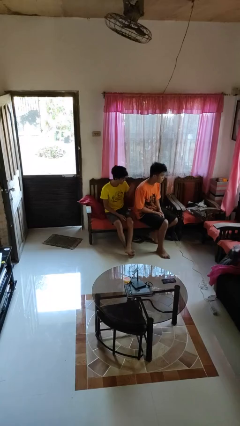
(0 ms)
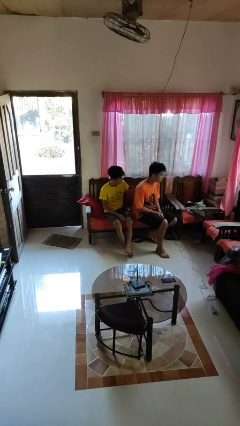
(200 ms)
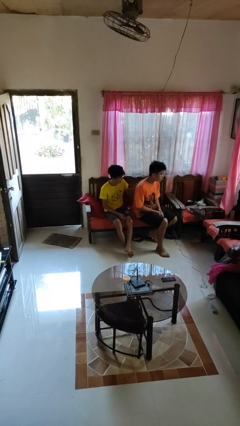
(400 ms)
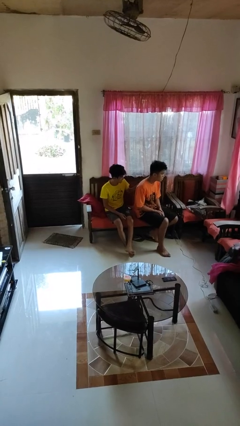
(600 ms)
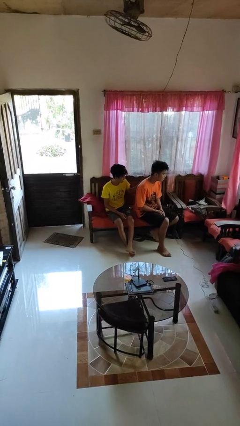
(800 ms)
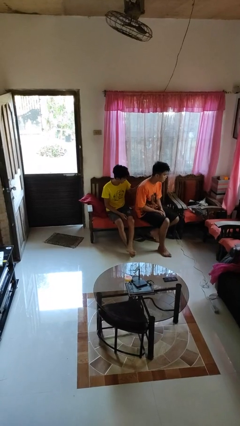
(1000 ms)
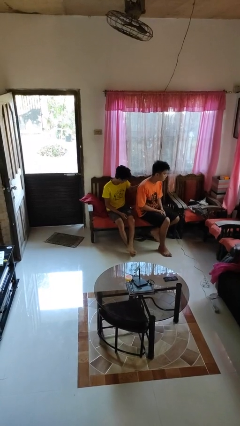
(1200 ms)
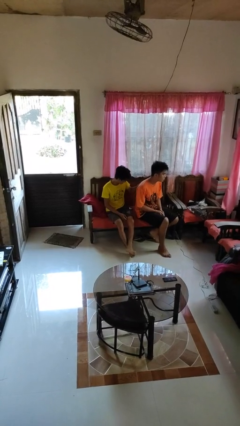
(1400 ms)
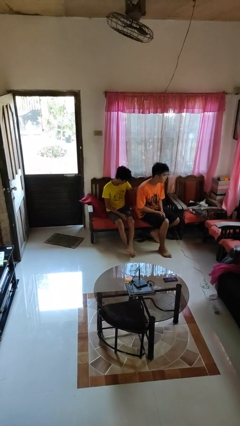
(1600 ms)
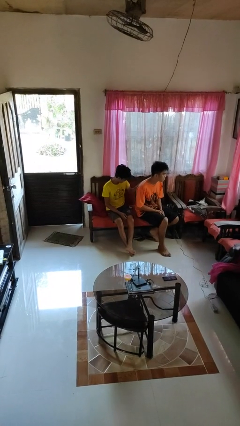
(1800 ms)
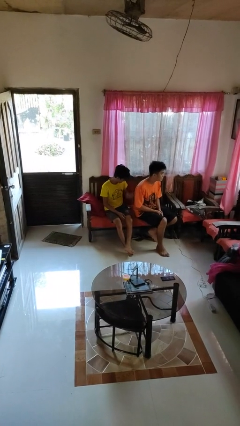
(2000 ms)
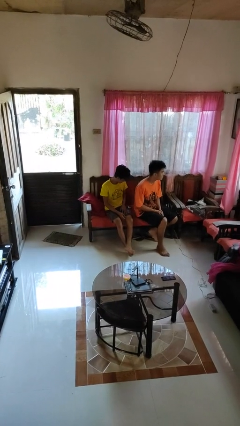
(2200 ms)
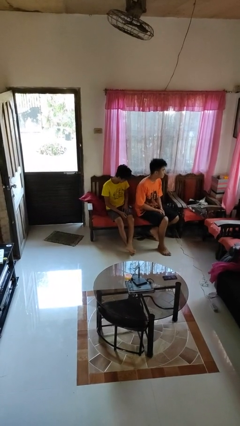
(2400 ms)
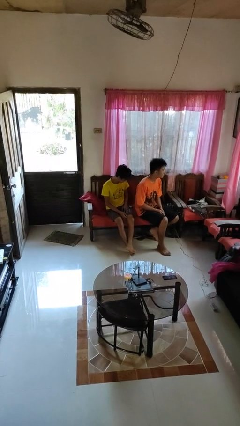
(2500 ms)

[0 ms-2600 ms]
person touches back of person

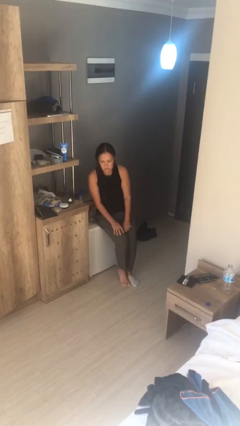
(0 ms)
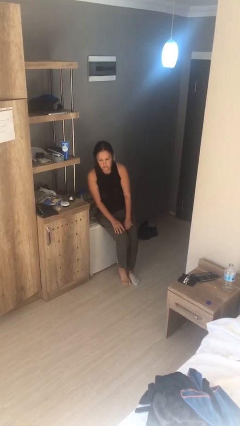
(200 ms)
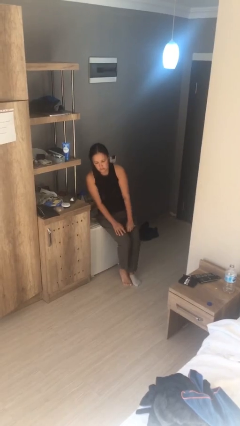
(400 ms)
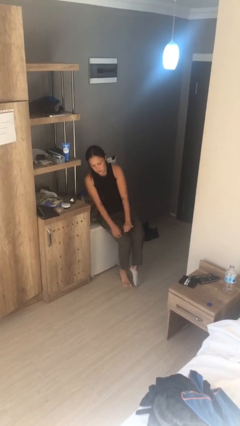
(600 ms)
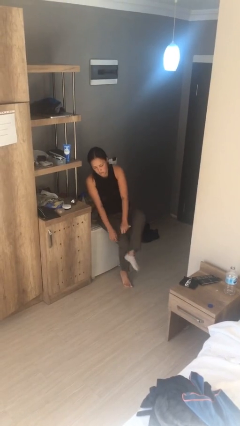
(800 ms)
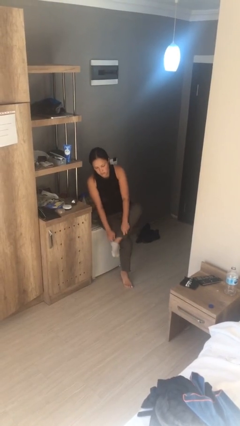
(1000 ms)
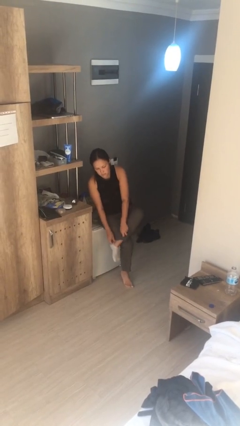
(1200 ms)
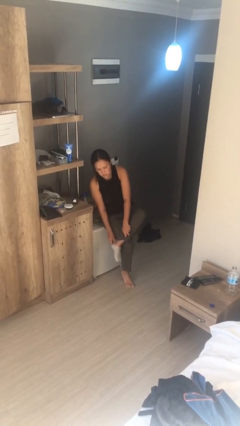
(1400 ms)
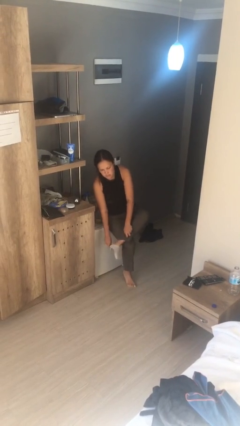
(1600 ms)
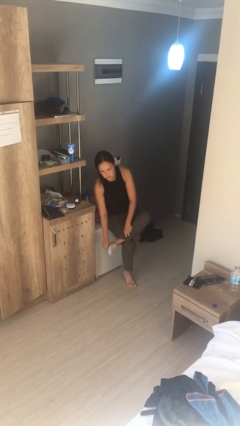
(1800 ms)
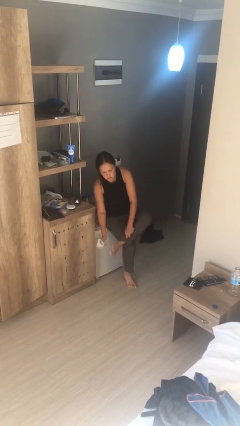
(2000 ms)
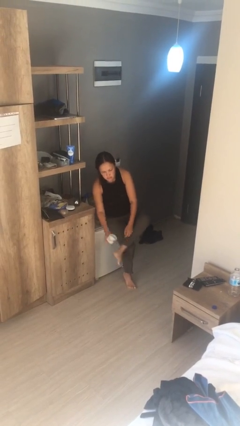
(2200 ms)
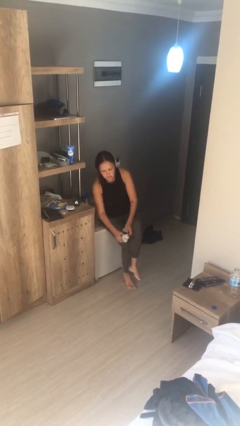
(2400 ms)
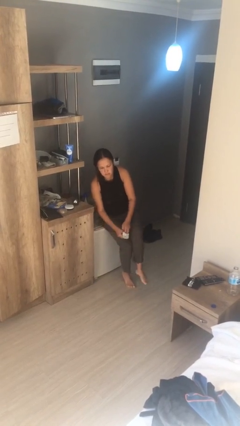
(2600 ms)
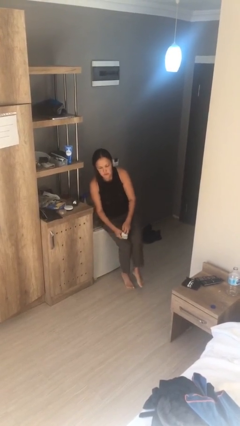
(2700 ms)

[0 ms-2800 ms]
person takes off socks

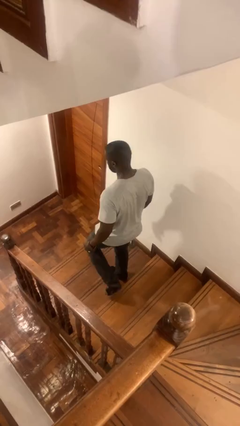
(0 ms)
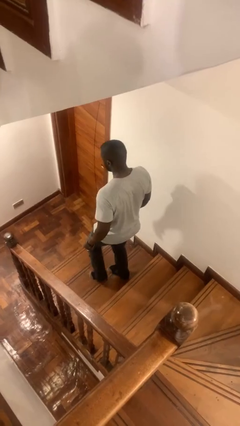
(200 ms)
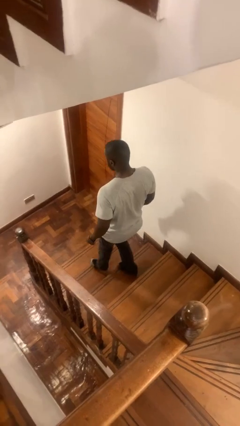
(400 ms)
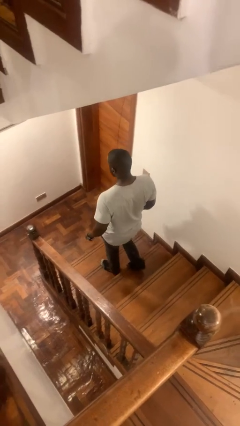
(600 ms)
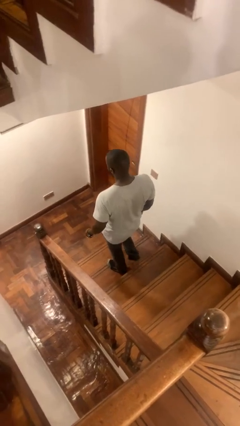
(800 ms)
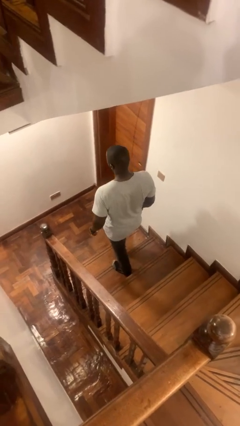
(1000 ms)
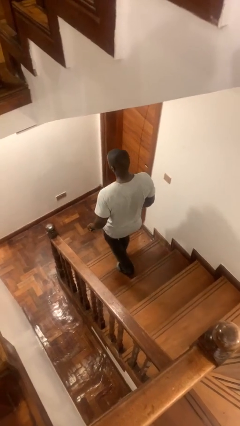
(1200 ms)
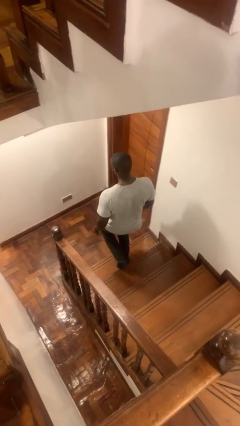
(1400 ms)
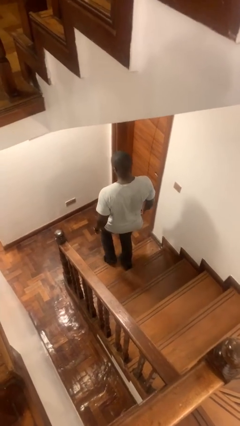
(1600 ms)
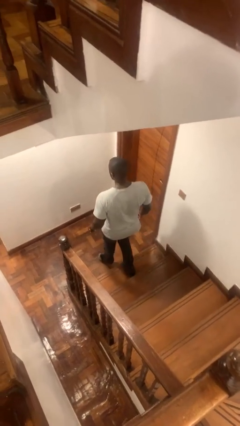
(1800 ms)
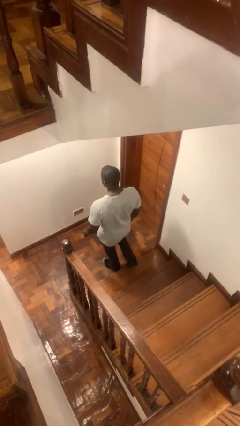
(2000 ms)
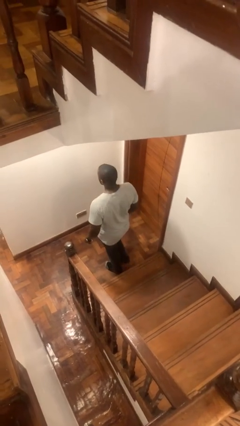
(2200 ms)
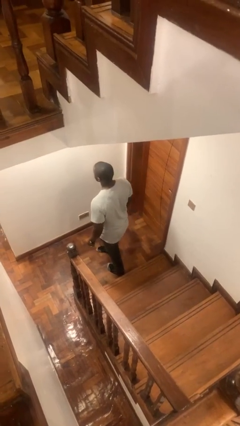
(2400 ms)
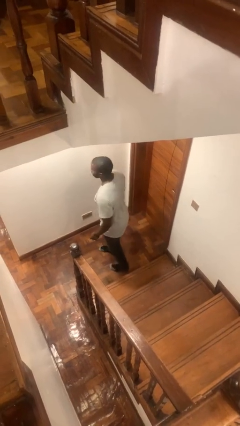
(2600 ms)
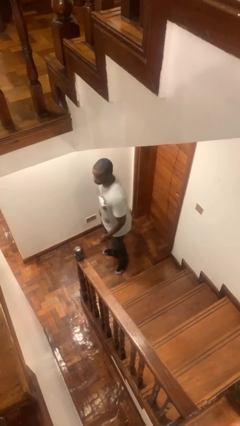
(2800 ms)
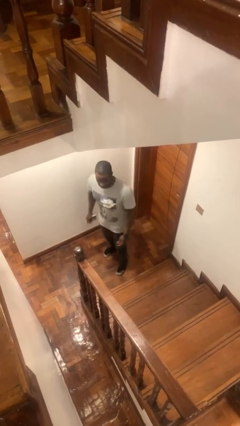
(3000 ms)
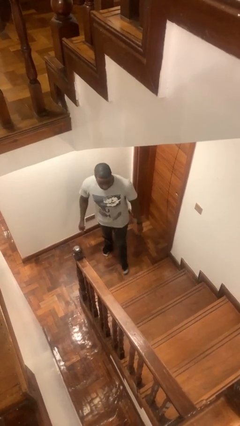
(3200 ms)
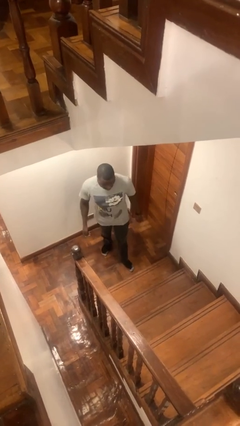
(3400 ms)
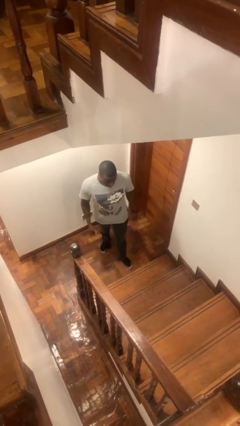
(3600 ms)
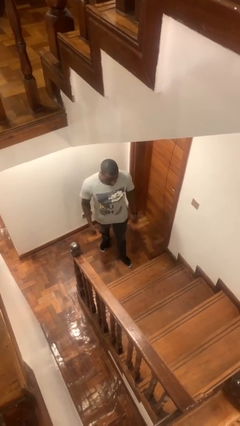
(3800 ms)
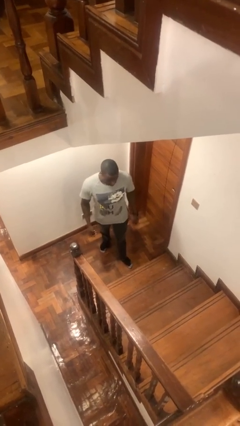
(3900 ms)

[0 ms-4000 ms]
person climbs down stairs

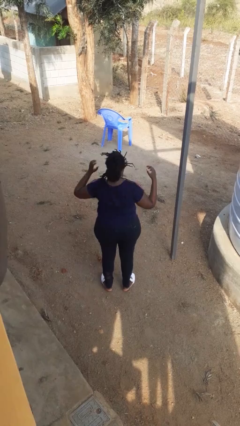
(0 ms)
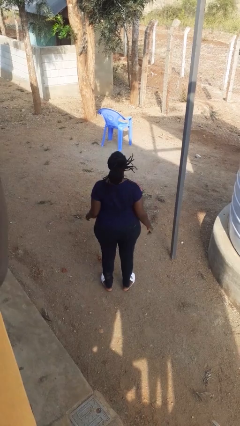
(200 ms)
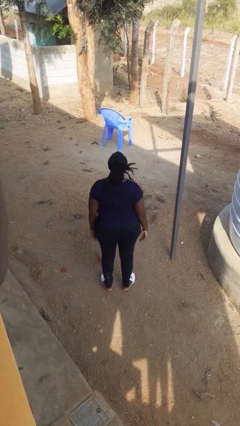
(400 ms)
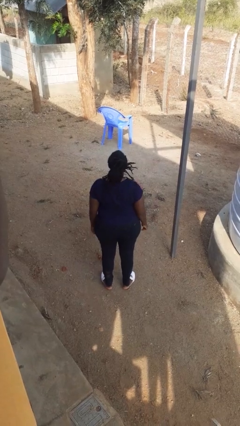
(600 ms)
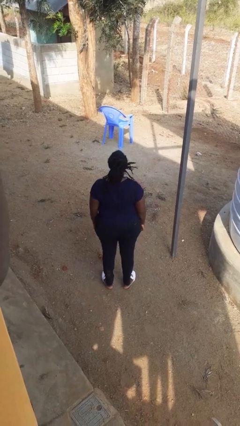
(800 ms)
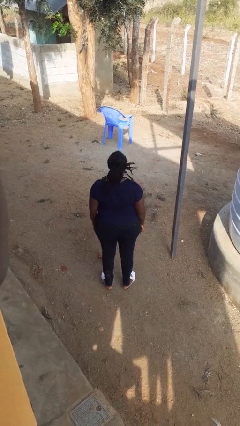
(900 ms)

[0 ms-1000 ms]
person puts hair in ponytail

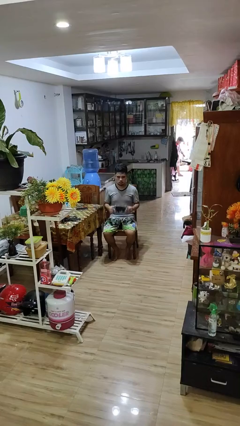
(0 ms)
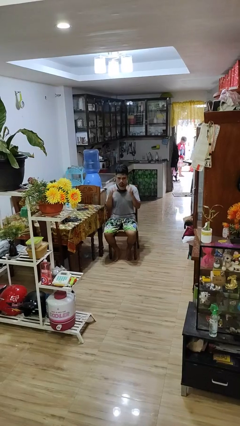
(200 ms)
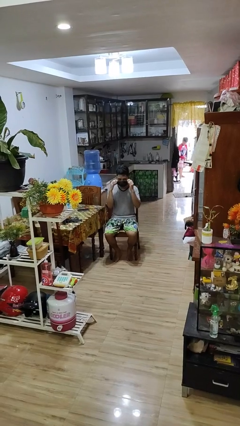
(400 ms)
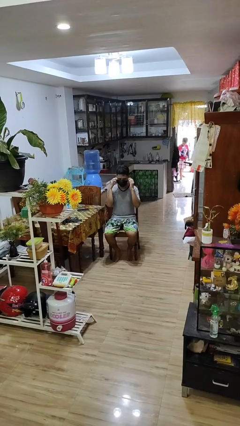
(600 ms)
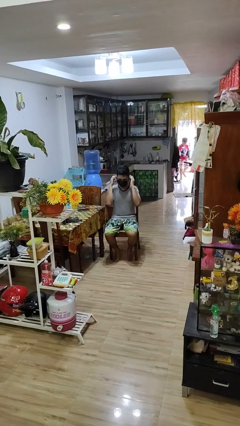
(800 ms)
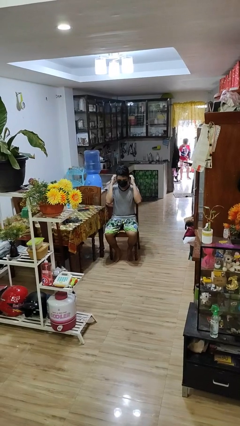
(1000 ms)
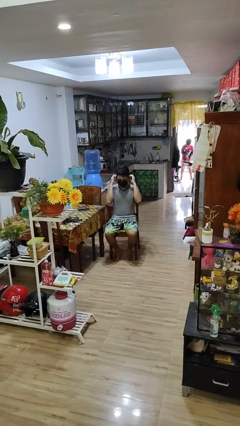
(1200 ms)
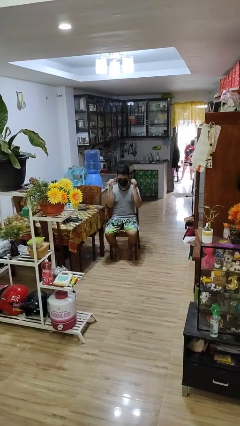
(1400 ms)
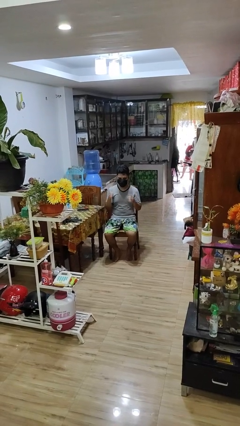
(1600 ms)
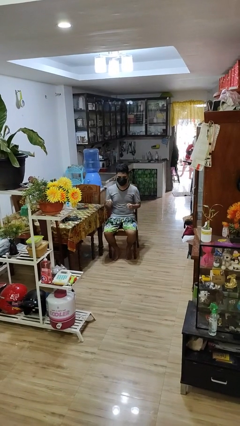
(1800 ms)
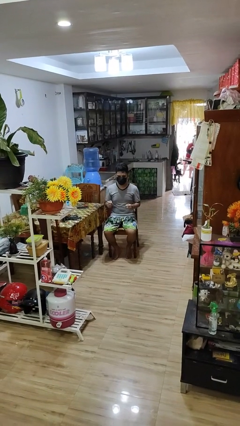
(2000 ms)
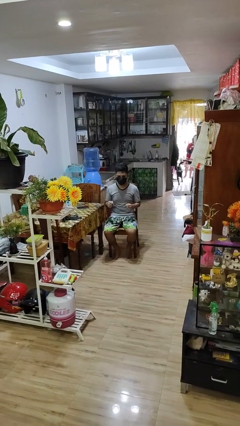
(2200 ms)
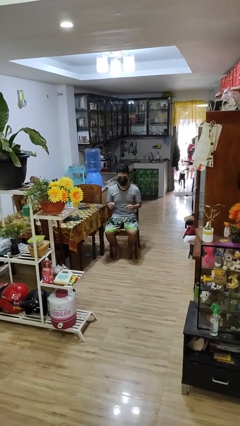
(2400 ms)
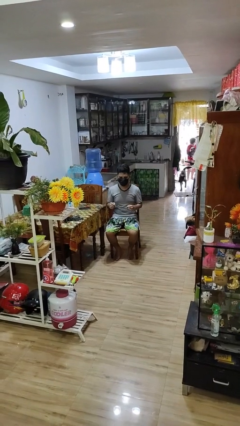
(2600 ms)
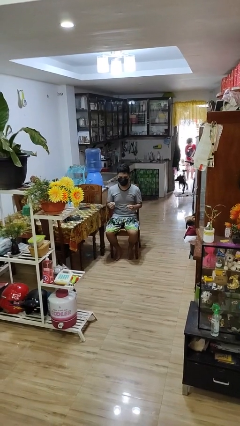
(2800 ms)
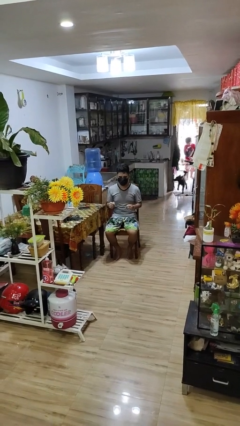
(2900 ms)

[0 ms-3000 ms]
person puts on facemask

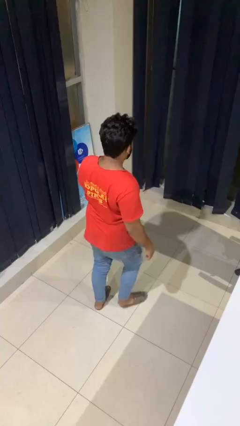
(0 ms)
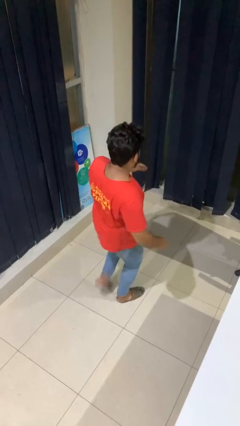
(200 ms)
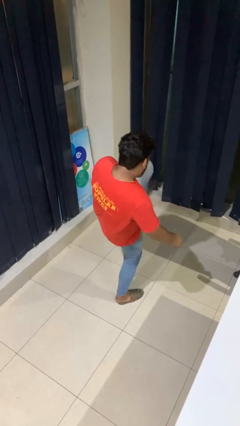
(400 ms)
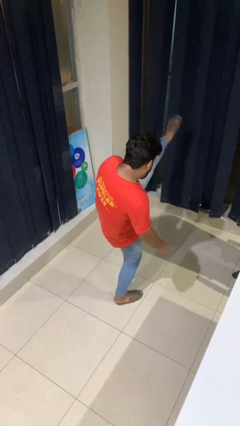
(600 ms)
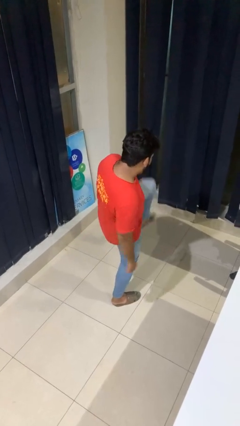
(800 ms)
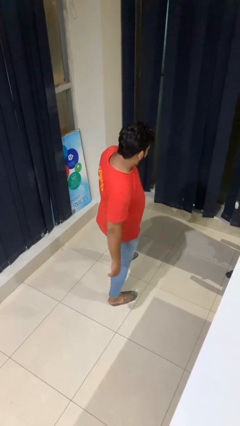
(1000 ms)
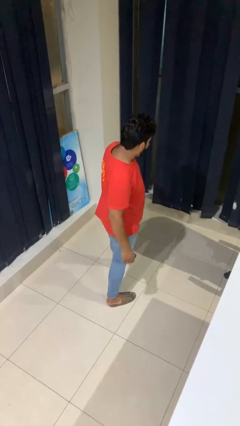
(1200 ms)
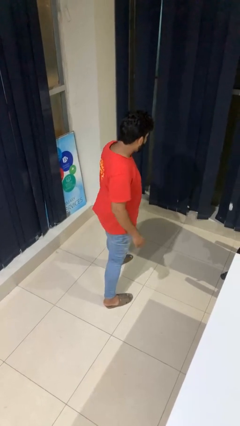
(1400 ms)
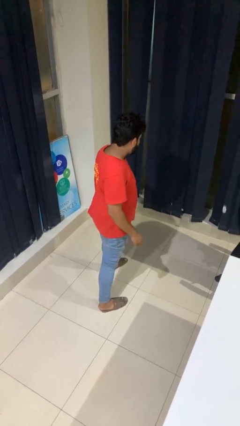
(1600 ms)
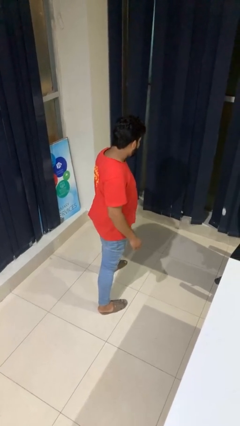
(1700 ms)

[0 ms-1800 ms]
person karate kicks

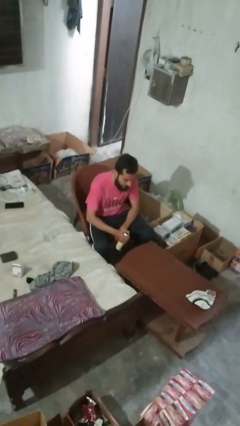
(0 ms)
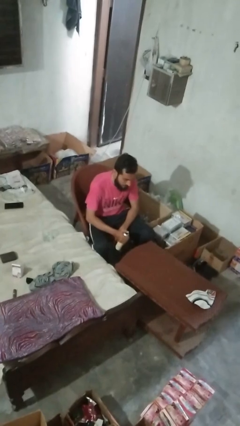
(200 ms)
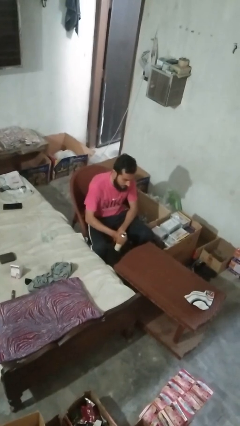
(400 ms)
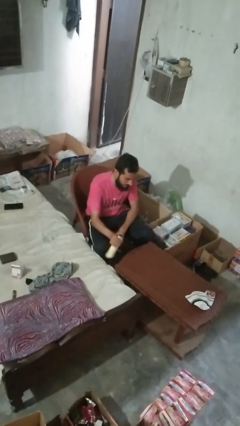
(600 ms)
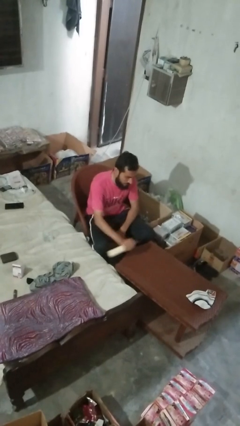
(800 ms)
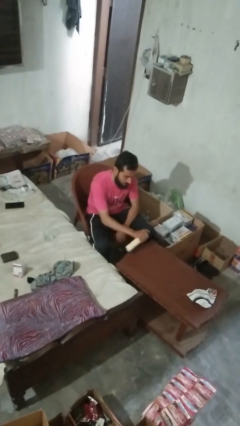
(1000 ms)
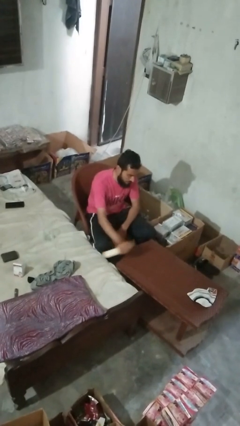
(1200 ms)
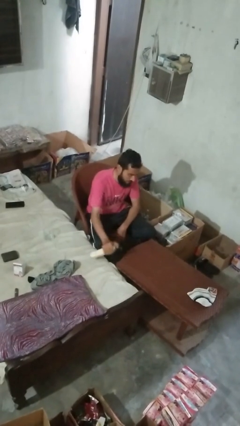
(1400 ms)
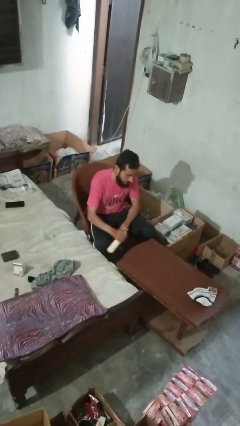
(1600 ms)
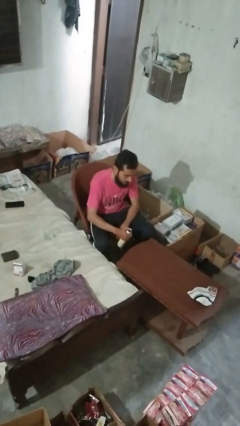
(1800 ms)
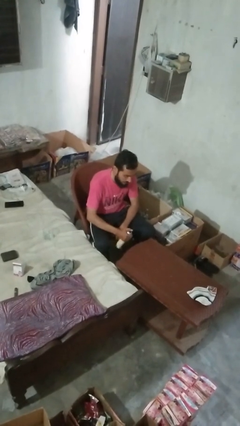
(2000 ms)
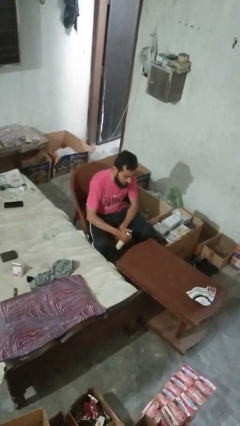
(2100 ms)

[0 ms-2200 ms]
person sprays from bottle
